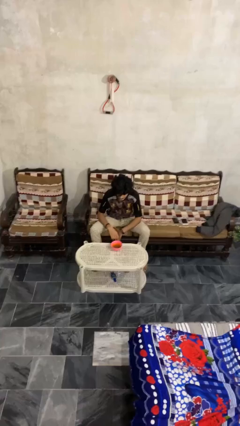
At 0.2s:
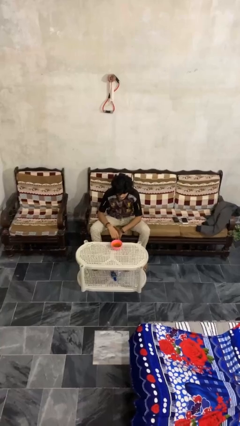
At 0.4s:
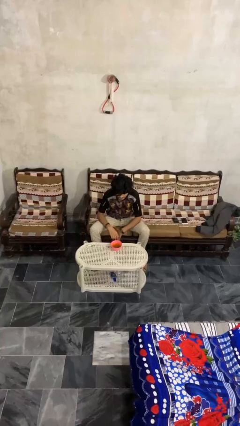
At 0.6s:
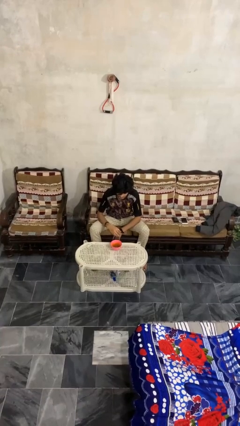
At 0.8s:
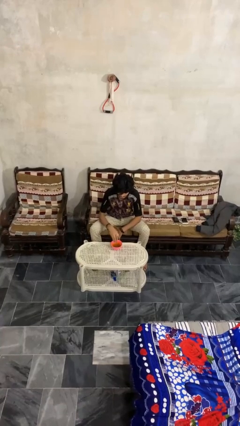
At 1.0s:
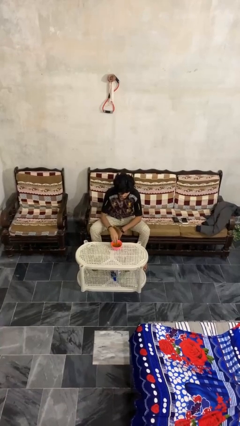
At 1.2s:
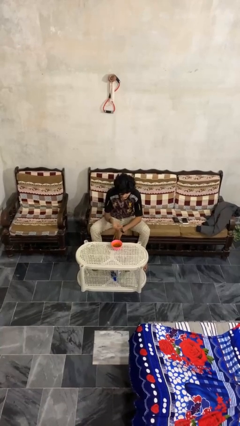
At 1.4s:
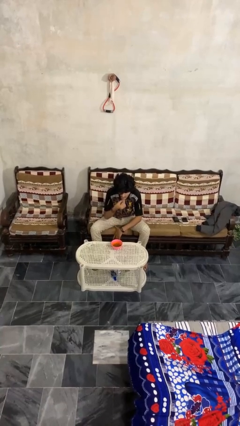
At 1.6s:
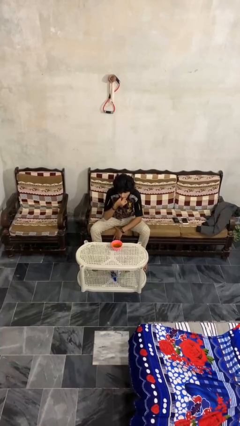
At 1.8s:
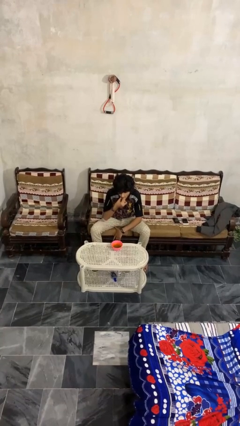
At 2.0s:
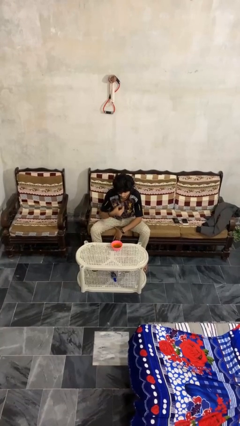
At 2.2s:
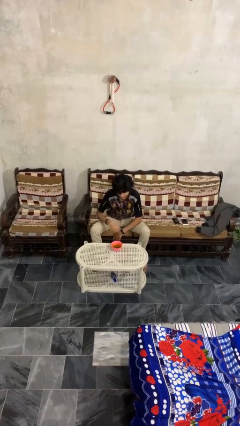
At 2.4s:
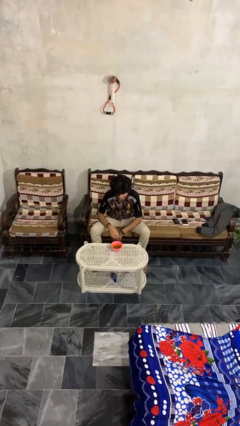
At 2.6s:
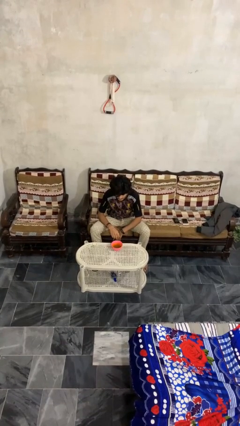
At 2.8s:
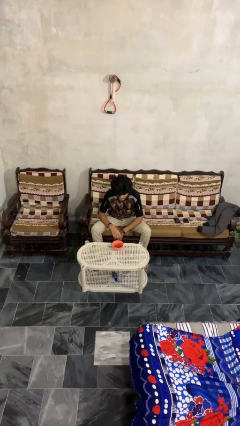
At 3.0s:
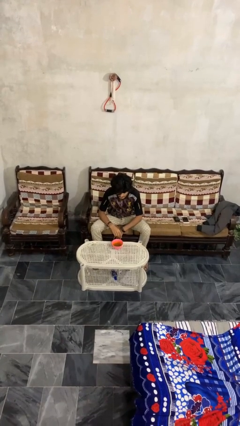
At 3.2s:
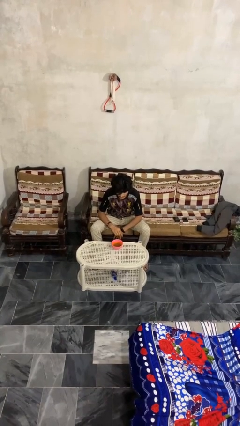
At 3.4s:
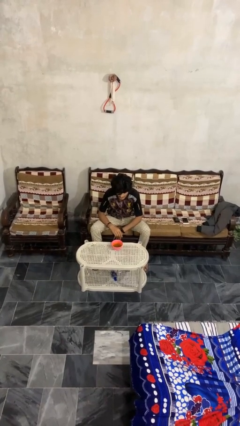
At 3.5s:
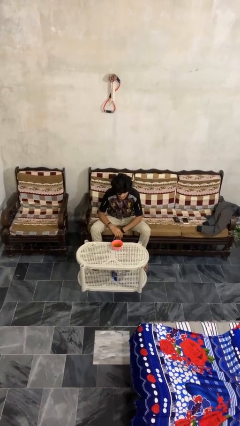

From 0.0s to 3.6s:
person eats with hands

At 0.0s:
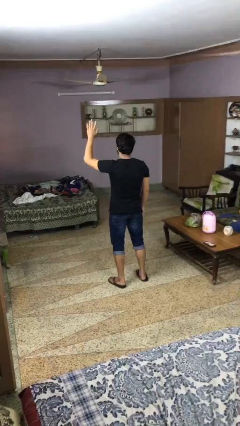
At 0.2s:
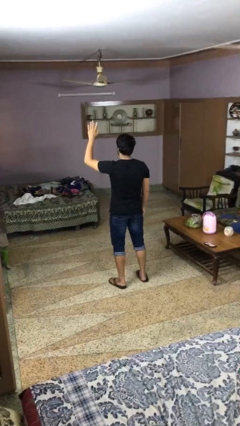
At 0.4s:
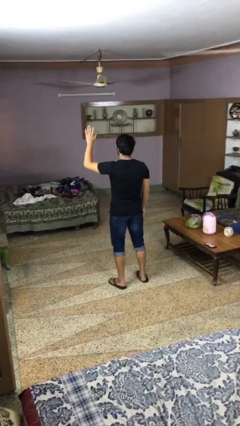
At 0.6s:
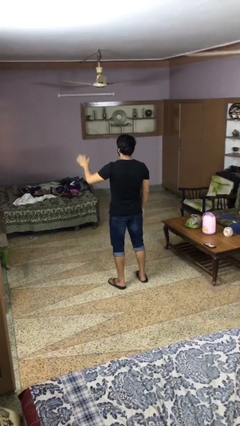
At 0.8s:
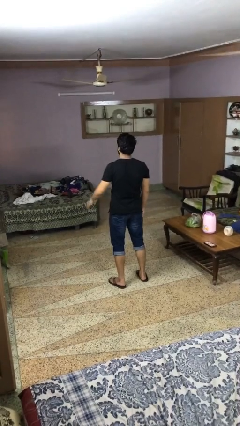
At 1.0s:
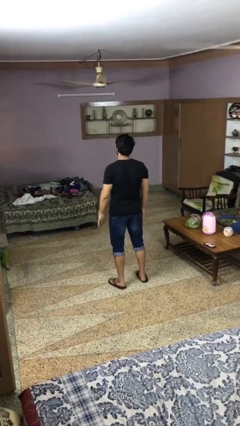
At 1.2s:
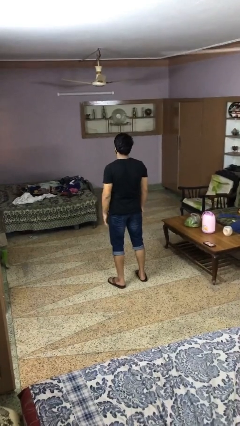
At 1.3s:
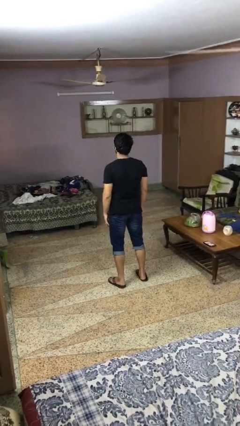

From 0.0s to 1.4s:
person gestures lower hand

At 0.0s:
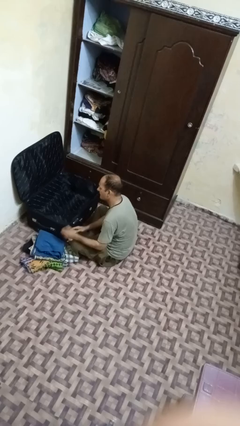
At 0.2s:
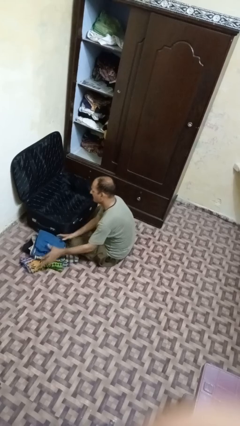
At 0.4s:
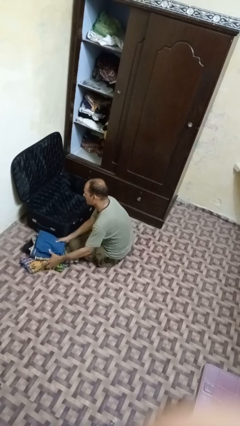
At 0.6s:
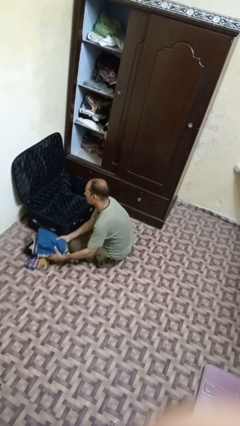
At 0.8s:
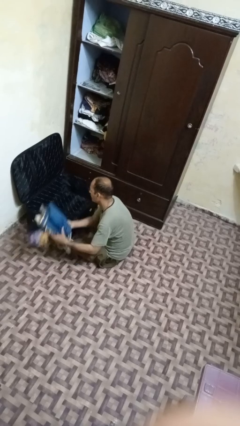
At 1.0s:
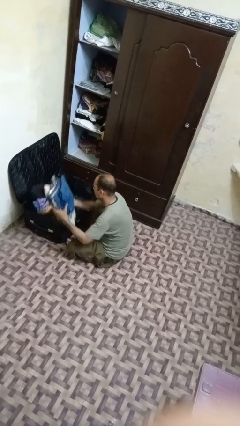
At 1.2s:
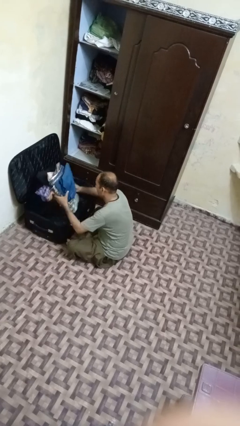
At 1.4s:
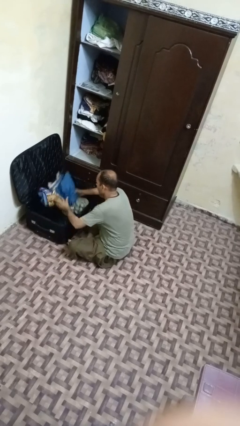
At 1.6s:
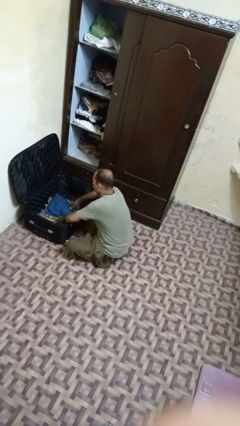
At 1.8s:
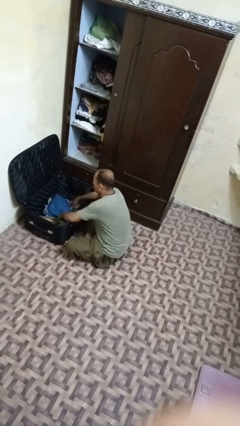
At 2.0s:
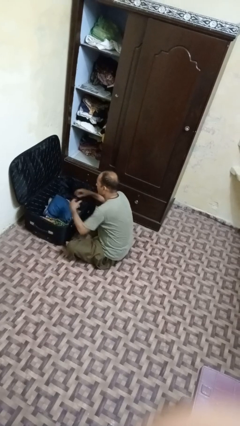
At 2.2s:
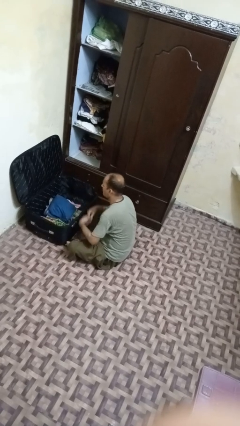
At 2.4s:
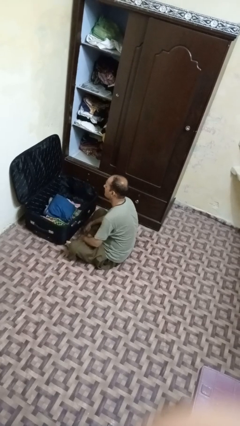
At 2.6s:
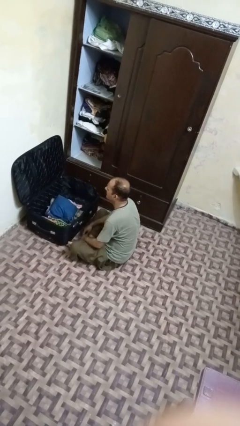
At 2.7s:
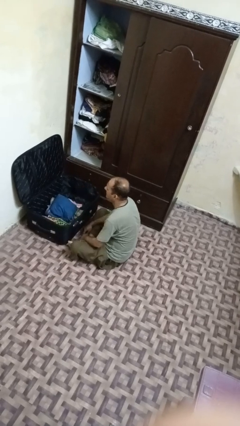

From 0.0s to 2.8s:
person loads clothes into suitcase

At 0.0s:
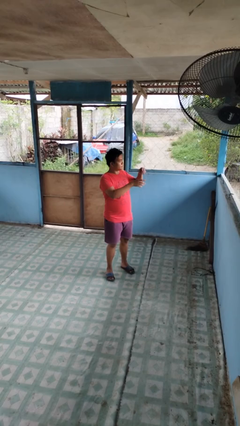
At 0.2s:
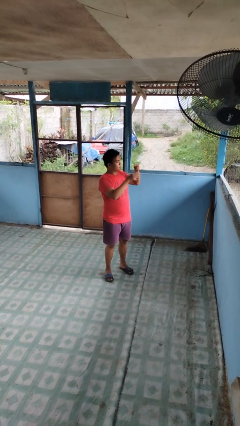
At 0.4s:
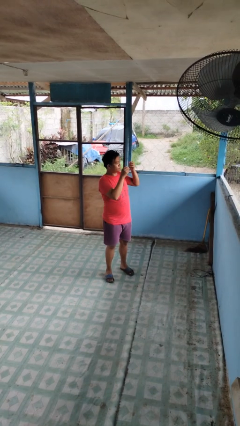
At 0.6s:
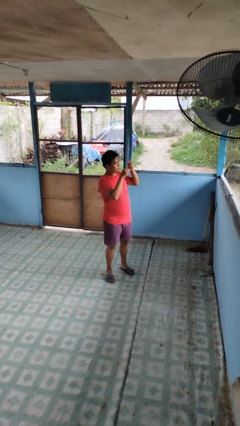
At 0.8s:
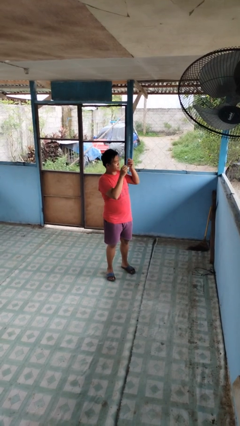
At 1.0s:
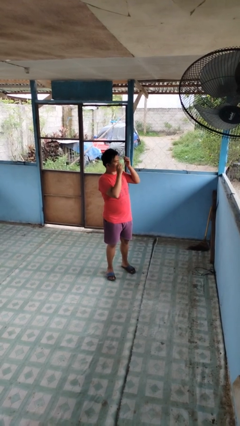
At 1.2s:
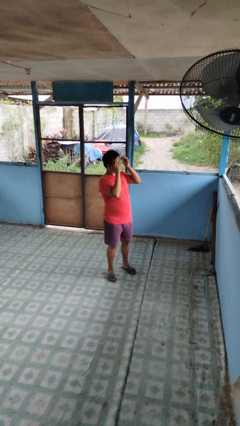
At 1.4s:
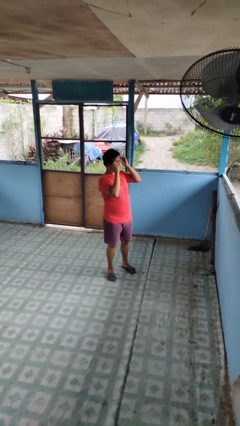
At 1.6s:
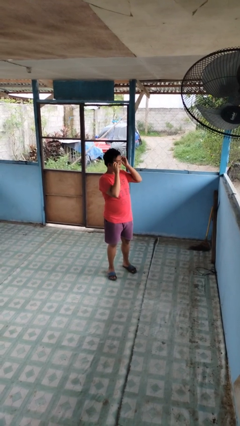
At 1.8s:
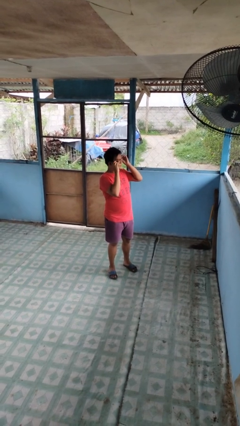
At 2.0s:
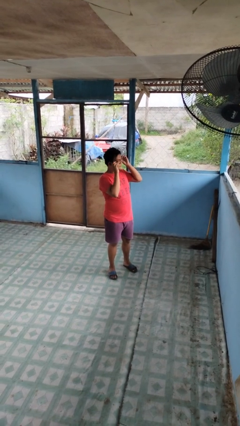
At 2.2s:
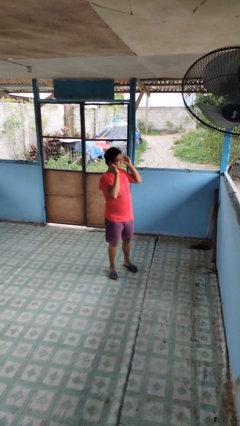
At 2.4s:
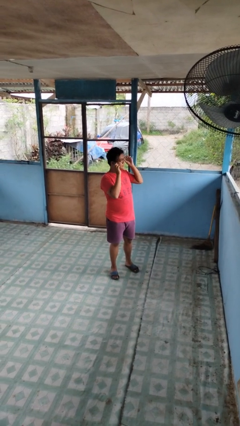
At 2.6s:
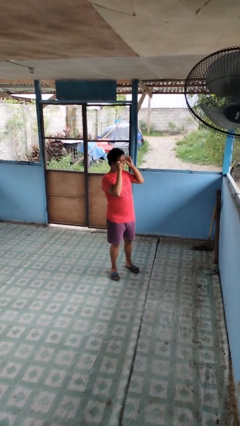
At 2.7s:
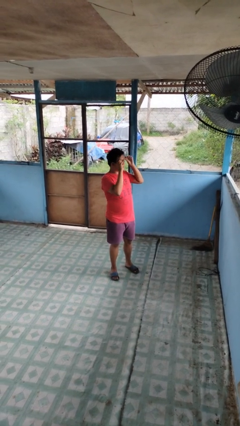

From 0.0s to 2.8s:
person puts on glasses

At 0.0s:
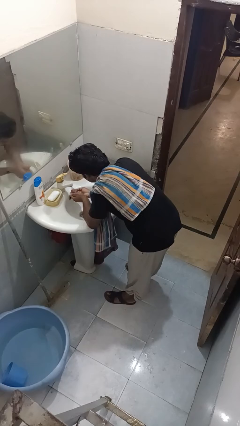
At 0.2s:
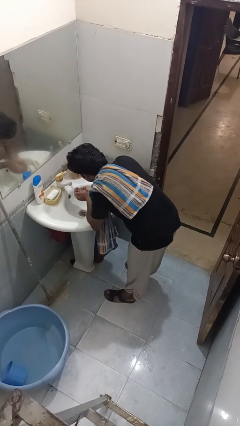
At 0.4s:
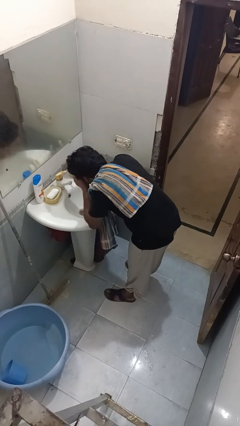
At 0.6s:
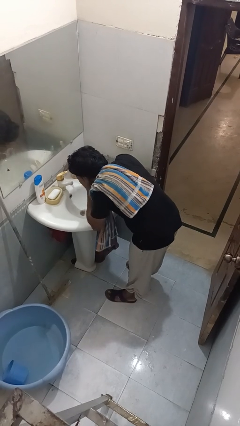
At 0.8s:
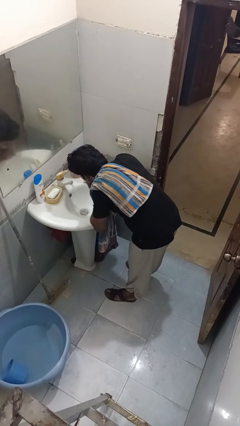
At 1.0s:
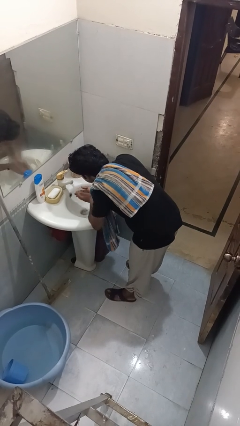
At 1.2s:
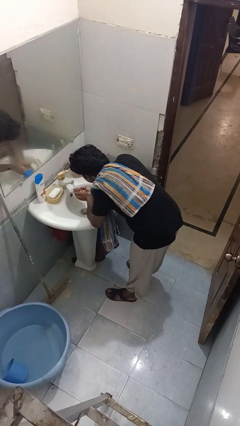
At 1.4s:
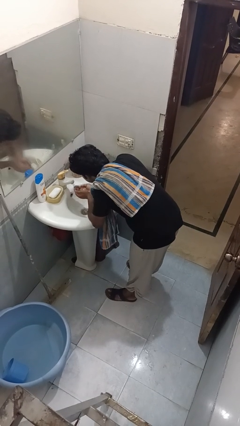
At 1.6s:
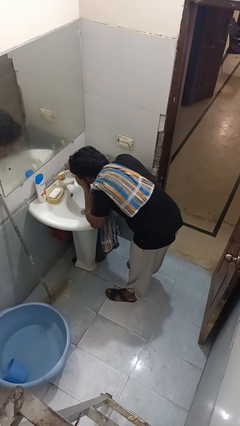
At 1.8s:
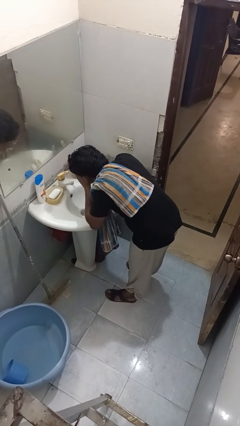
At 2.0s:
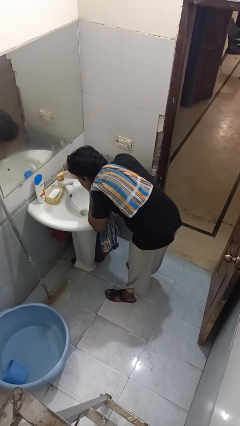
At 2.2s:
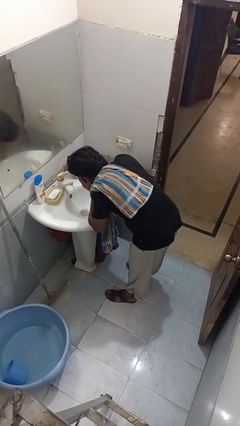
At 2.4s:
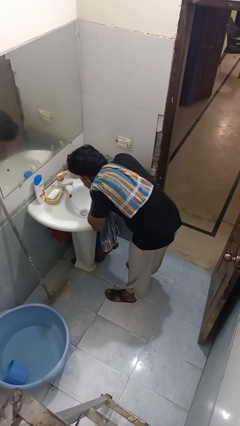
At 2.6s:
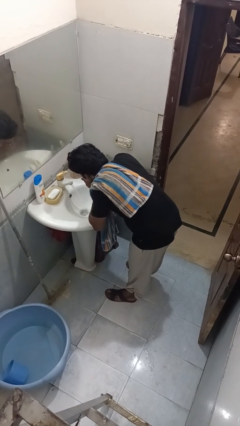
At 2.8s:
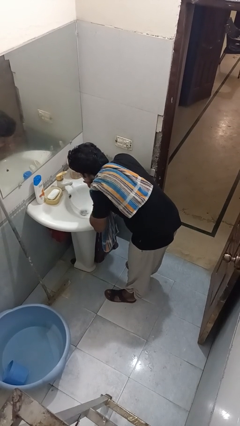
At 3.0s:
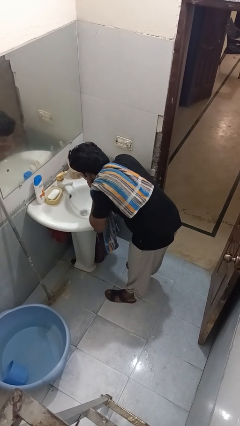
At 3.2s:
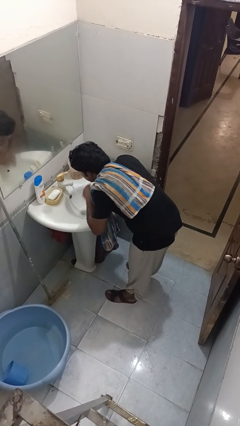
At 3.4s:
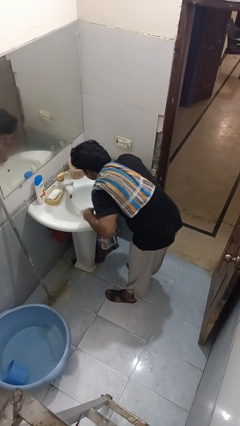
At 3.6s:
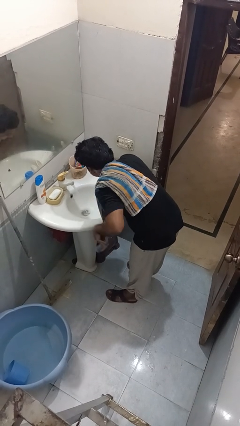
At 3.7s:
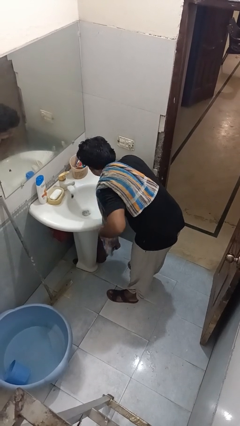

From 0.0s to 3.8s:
person washes face

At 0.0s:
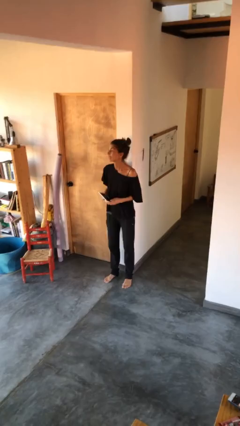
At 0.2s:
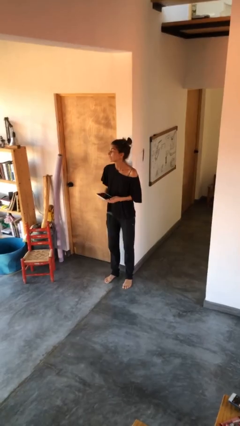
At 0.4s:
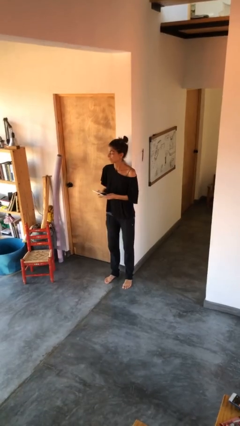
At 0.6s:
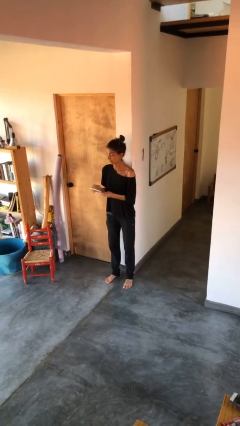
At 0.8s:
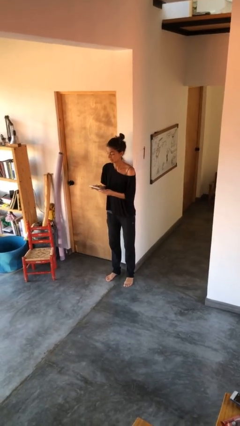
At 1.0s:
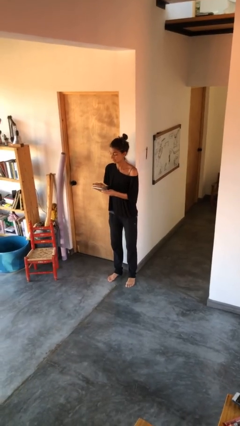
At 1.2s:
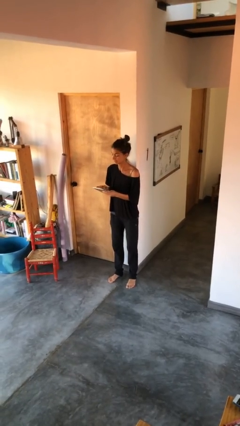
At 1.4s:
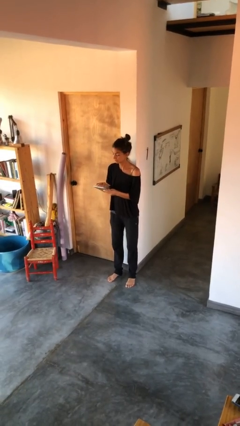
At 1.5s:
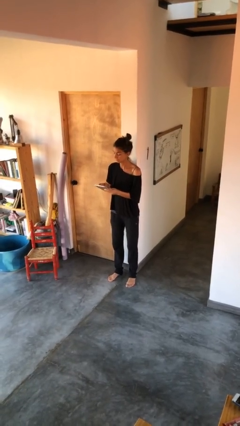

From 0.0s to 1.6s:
person interacts with tablet

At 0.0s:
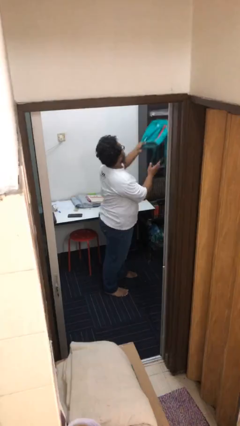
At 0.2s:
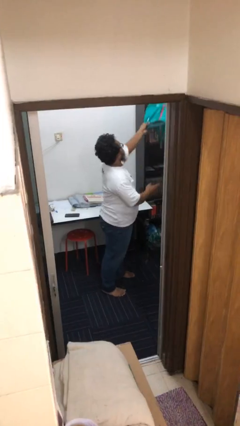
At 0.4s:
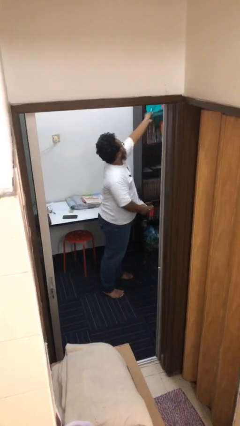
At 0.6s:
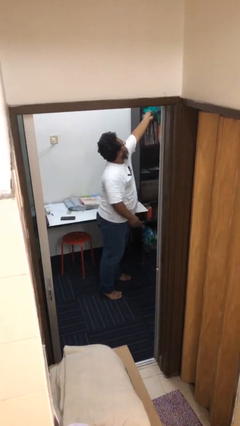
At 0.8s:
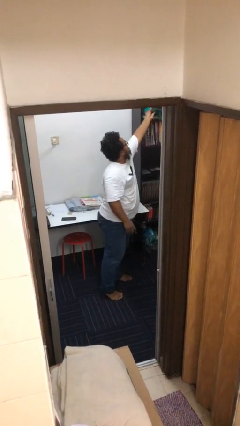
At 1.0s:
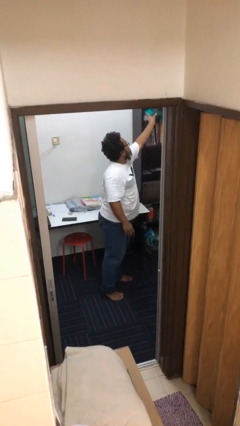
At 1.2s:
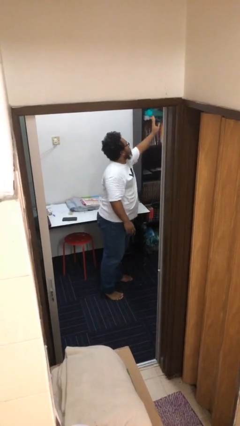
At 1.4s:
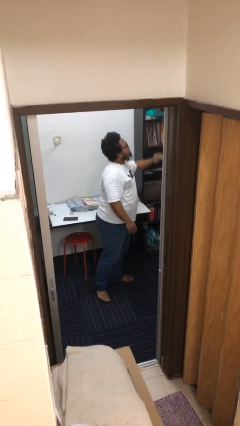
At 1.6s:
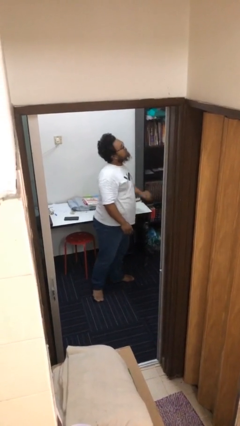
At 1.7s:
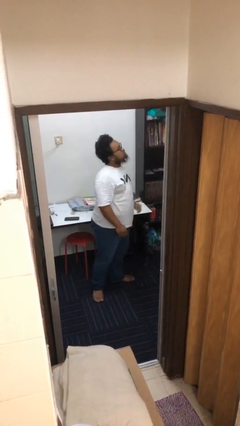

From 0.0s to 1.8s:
person puts down object on shelf
